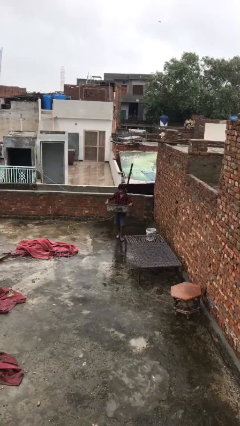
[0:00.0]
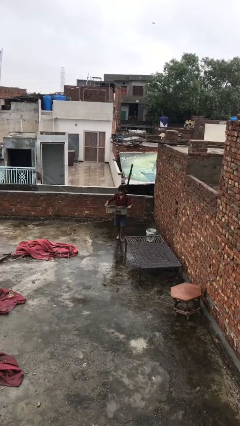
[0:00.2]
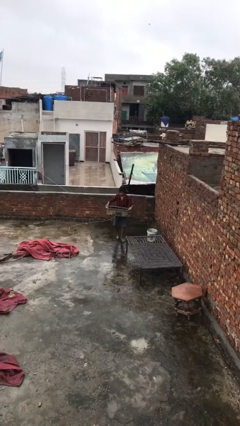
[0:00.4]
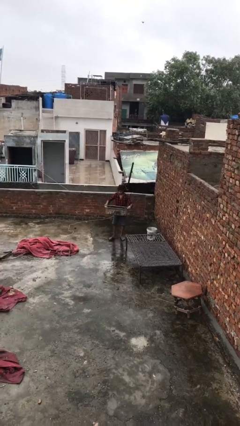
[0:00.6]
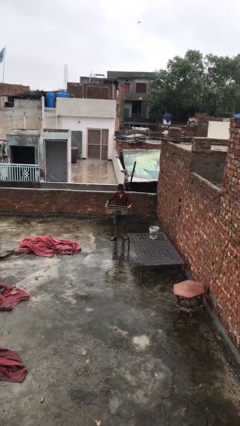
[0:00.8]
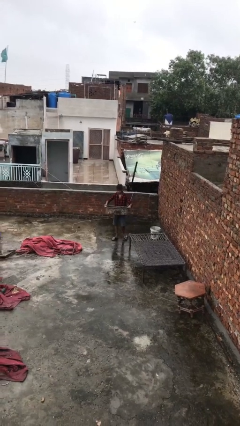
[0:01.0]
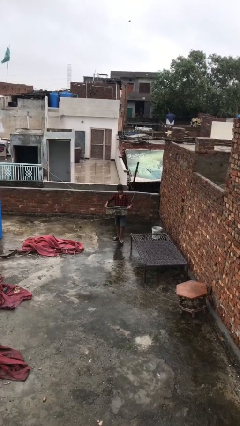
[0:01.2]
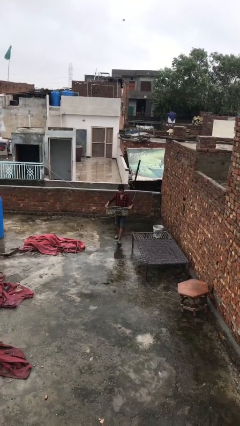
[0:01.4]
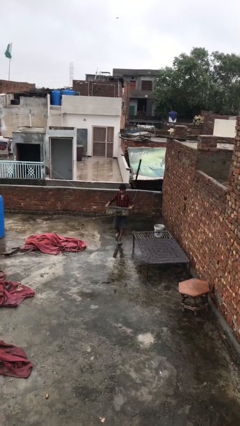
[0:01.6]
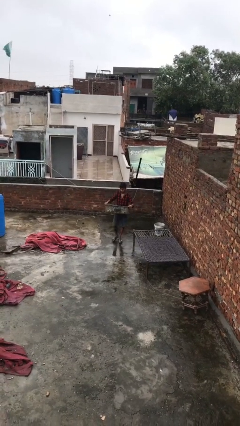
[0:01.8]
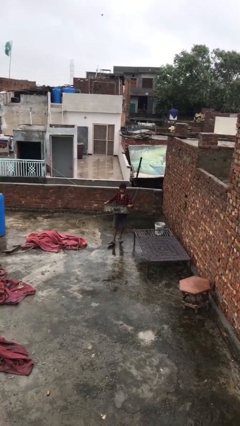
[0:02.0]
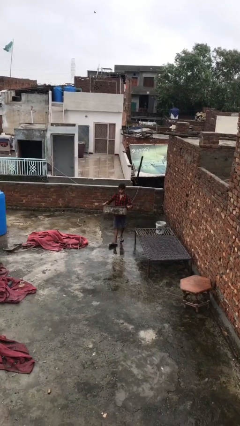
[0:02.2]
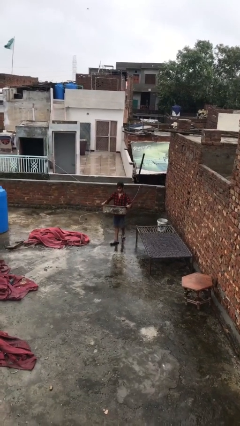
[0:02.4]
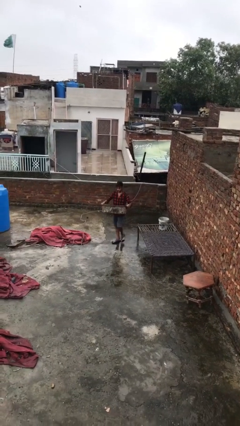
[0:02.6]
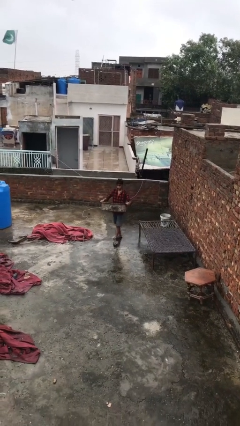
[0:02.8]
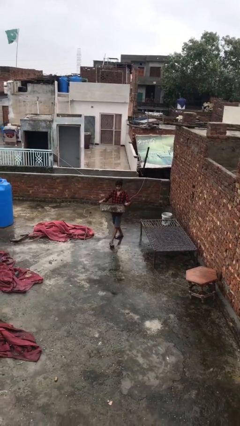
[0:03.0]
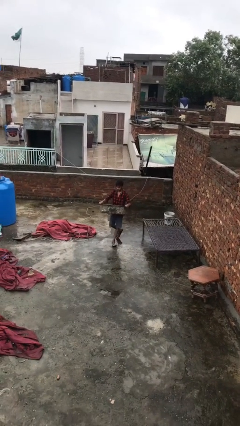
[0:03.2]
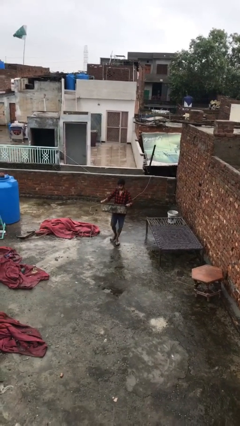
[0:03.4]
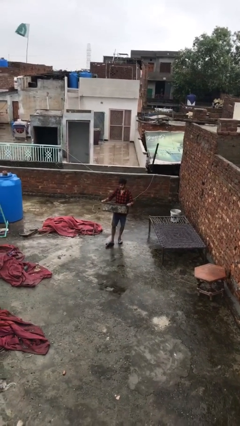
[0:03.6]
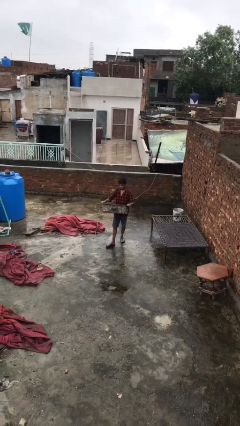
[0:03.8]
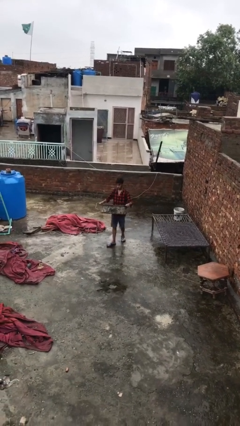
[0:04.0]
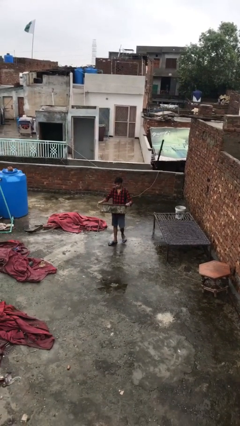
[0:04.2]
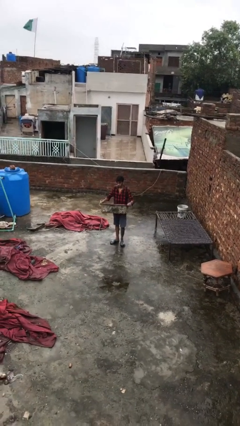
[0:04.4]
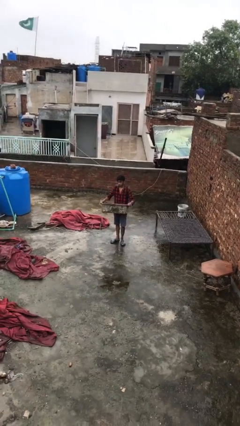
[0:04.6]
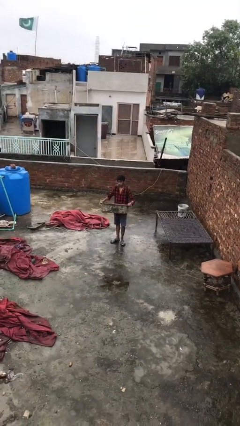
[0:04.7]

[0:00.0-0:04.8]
person carries heavy object

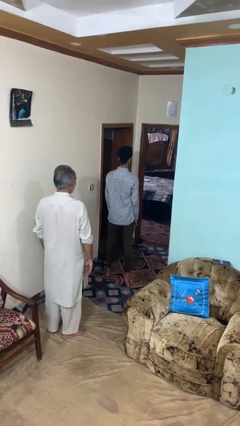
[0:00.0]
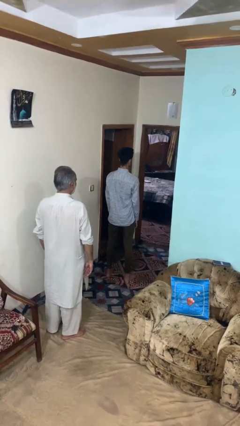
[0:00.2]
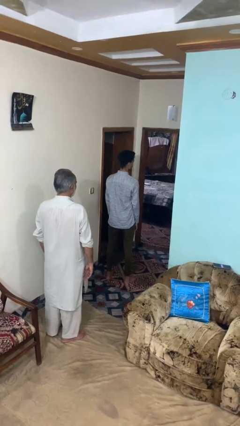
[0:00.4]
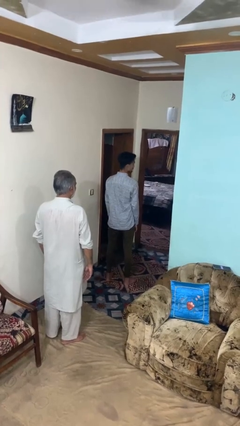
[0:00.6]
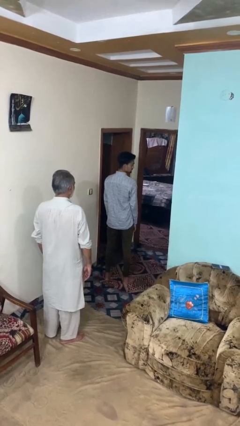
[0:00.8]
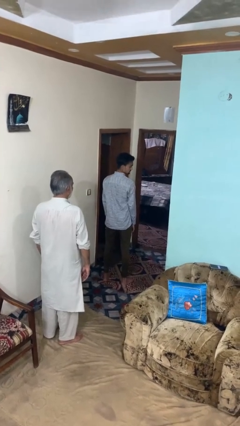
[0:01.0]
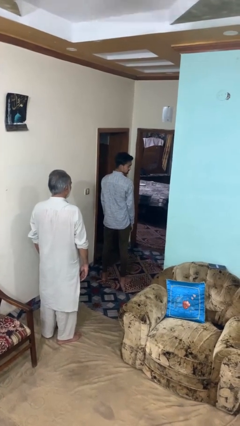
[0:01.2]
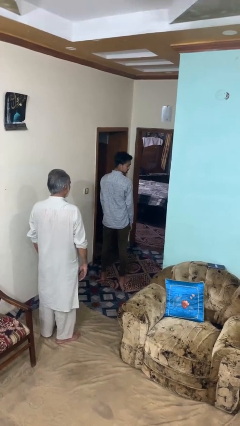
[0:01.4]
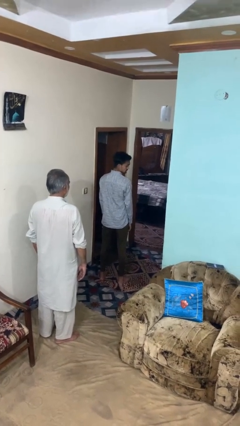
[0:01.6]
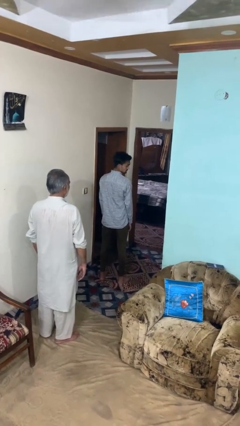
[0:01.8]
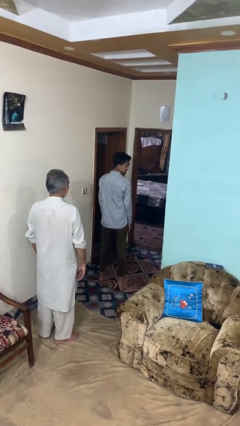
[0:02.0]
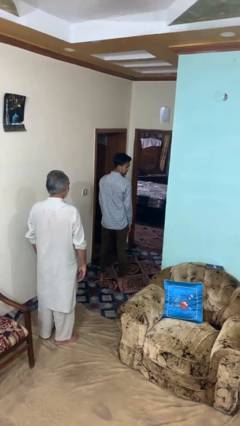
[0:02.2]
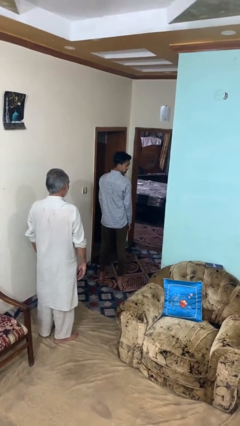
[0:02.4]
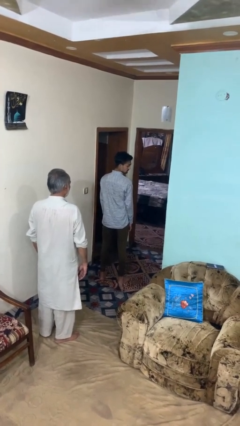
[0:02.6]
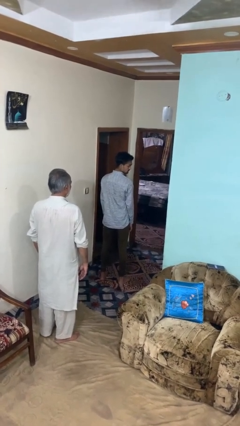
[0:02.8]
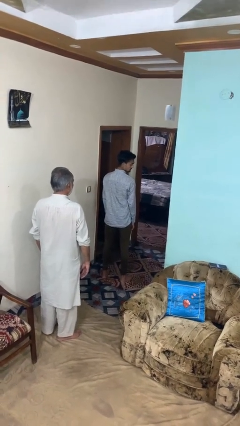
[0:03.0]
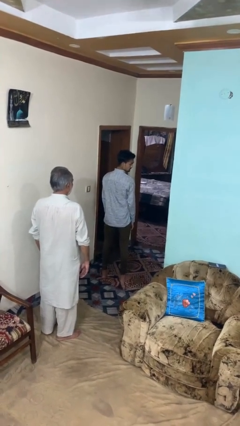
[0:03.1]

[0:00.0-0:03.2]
person looks over shoulder

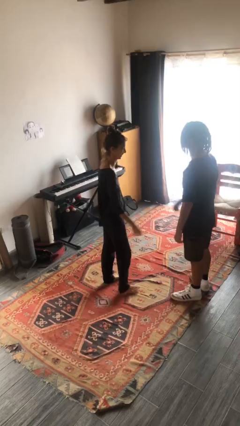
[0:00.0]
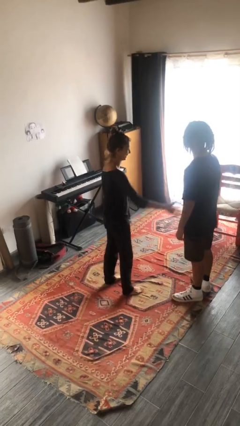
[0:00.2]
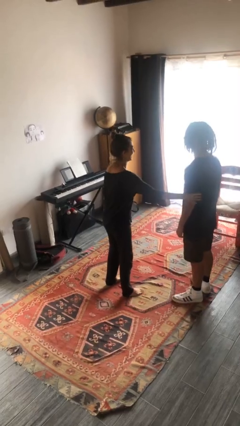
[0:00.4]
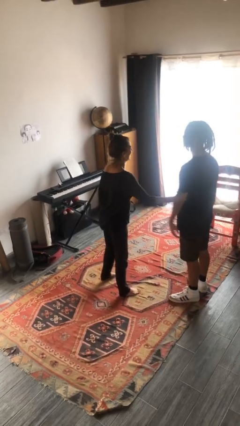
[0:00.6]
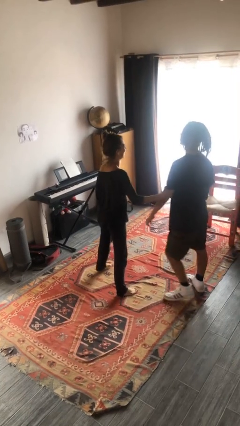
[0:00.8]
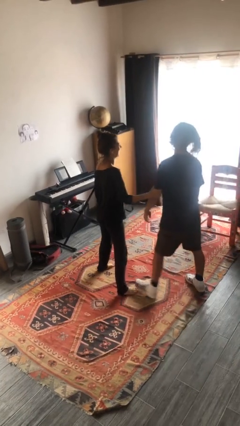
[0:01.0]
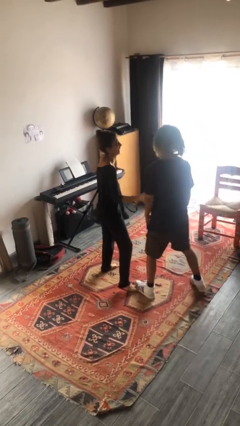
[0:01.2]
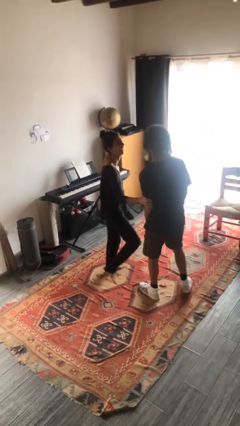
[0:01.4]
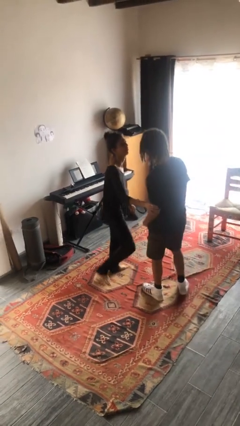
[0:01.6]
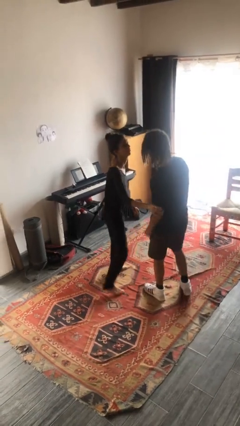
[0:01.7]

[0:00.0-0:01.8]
person grabs person by forearm

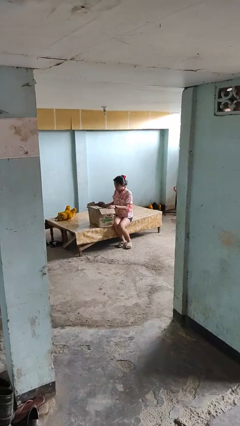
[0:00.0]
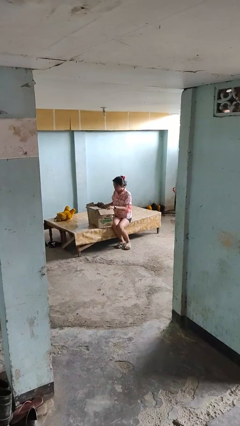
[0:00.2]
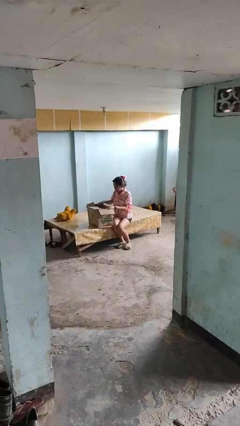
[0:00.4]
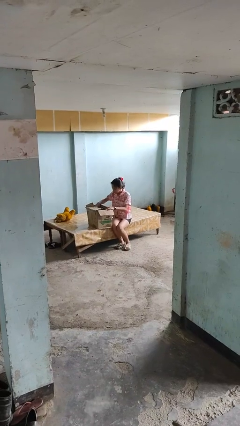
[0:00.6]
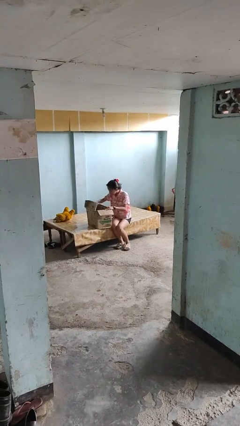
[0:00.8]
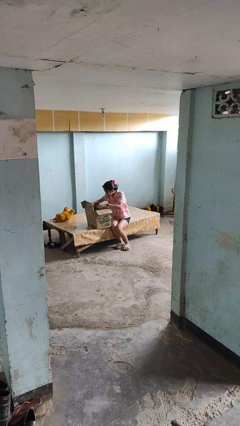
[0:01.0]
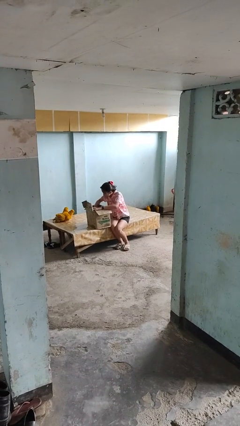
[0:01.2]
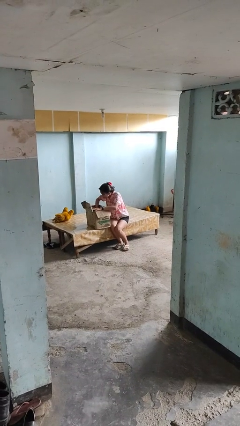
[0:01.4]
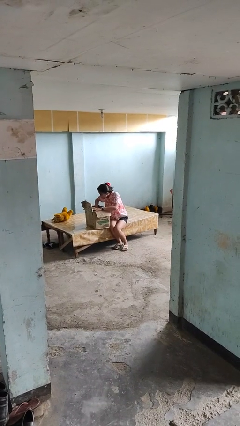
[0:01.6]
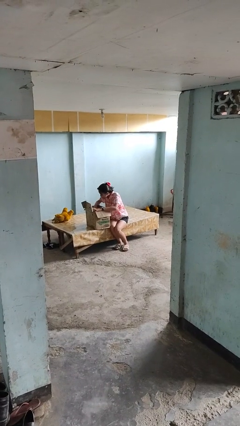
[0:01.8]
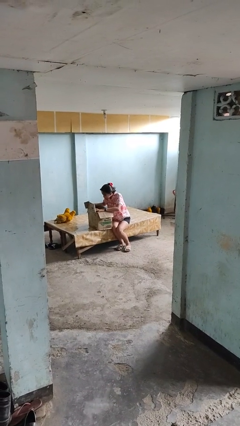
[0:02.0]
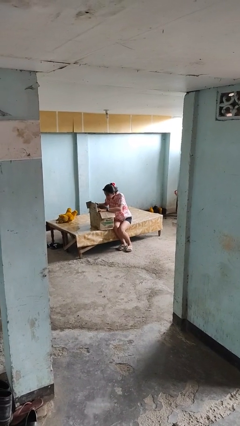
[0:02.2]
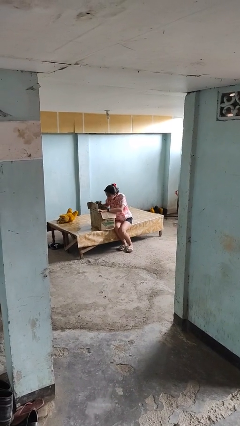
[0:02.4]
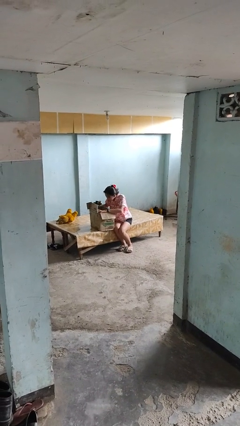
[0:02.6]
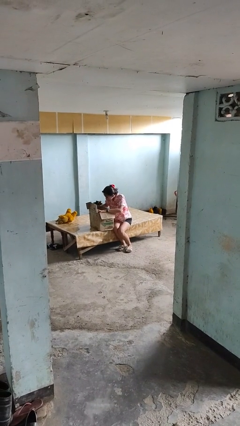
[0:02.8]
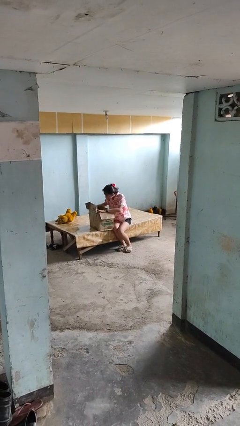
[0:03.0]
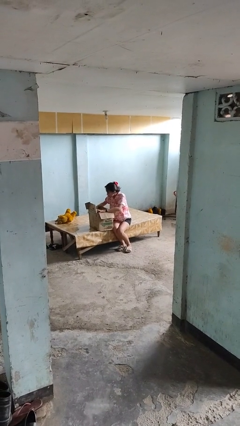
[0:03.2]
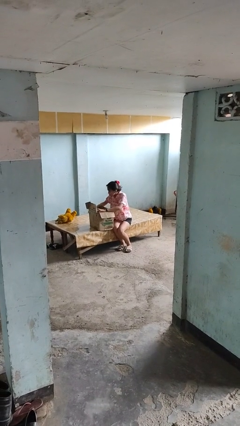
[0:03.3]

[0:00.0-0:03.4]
person searches in box

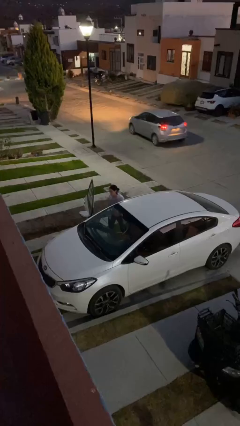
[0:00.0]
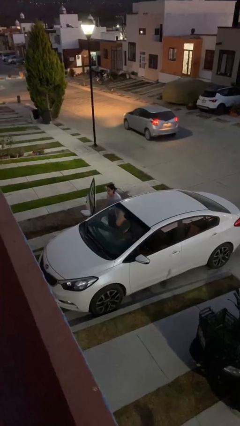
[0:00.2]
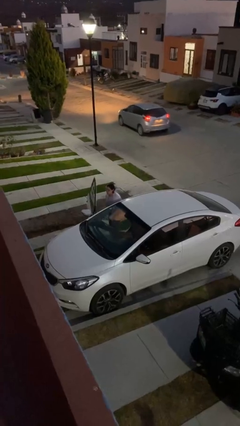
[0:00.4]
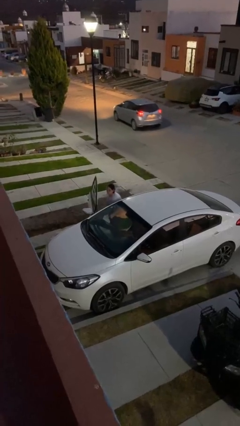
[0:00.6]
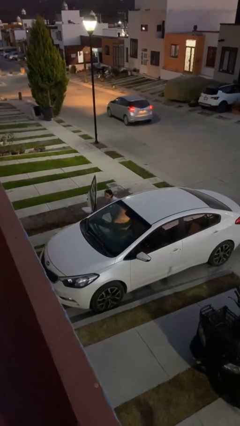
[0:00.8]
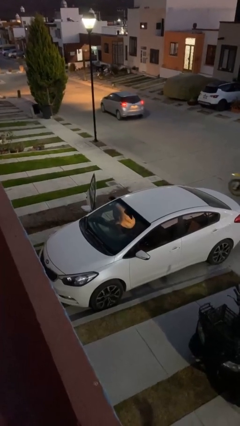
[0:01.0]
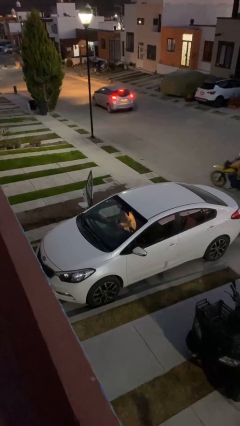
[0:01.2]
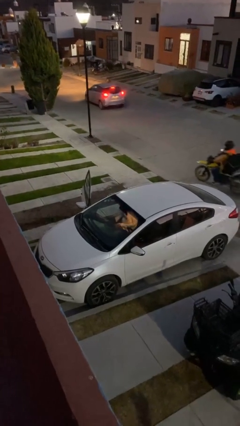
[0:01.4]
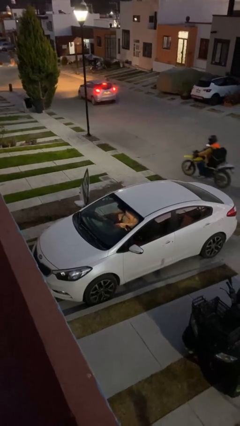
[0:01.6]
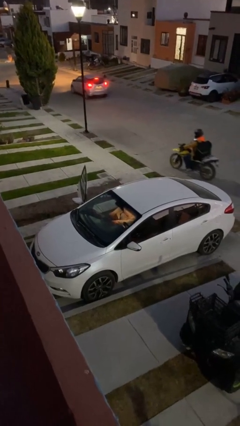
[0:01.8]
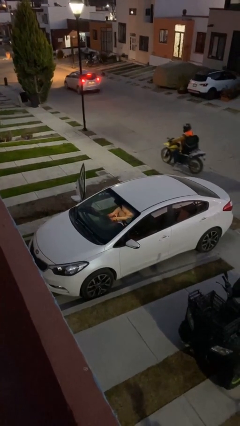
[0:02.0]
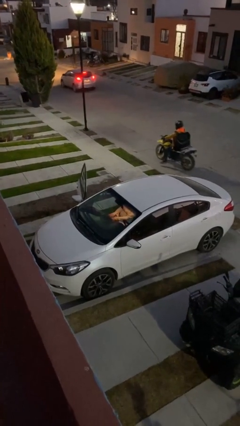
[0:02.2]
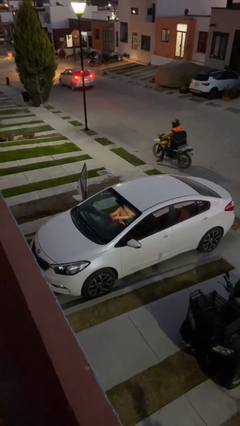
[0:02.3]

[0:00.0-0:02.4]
person enters car

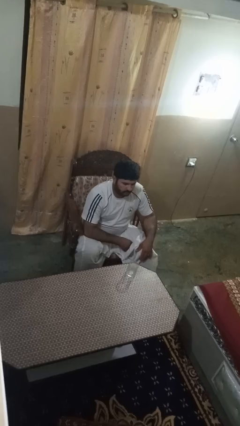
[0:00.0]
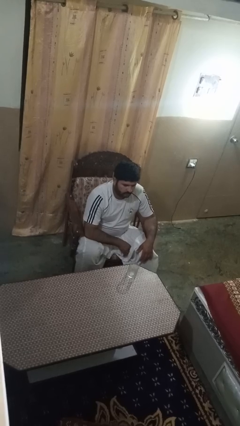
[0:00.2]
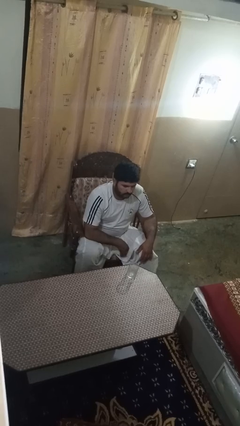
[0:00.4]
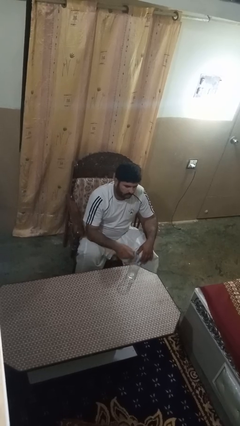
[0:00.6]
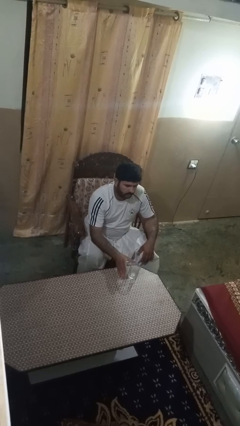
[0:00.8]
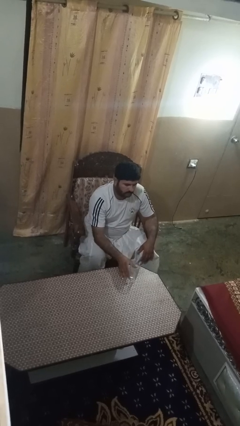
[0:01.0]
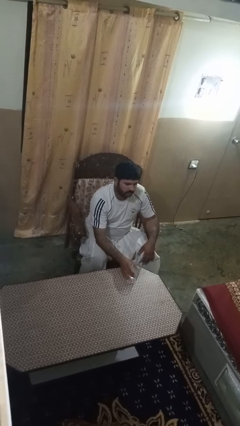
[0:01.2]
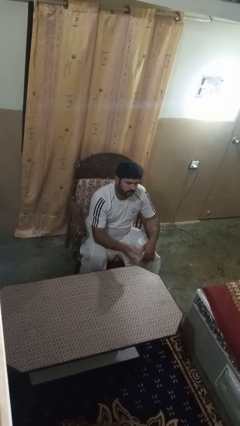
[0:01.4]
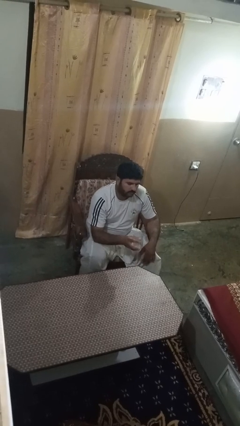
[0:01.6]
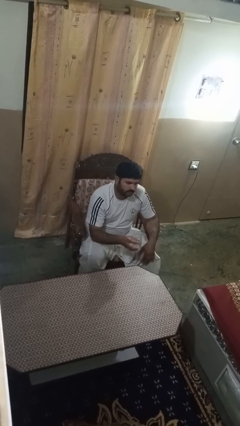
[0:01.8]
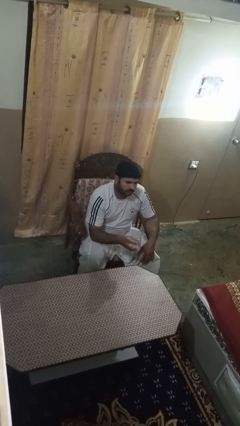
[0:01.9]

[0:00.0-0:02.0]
person picks up object from table
